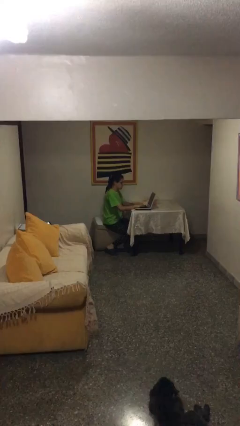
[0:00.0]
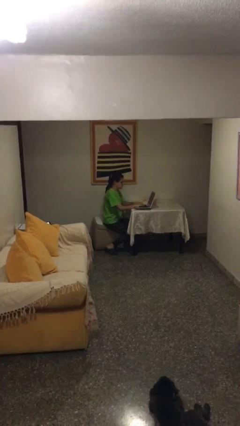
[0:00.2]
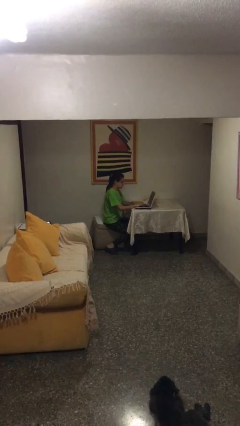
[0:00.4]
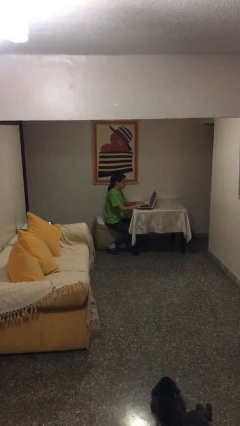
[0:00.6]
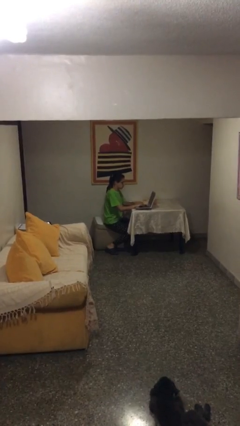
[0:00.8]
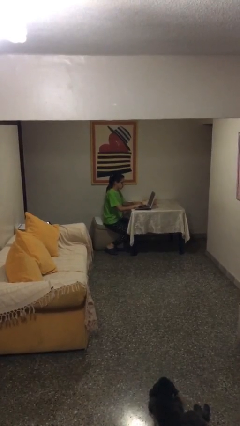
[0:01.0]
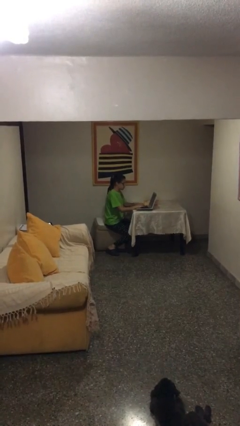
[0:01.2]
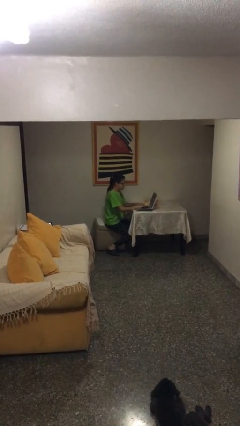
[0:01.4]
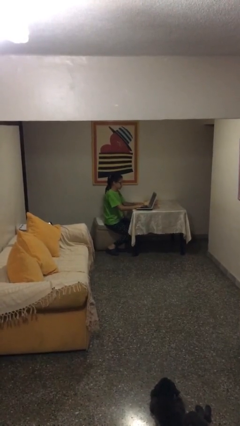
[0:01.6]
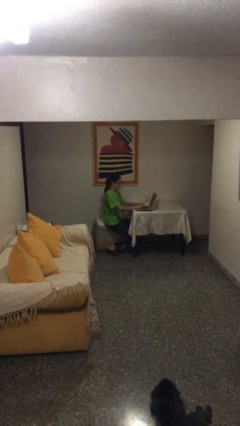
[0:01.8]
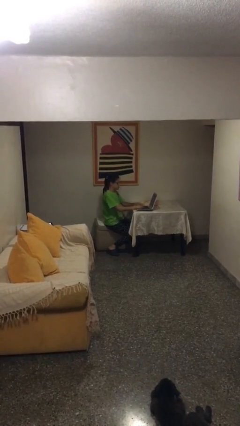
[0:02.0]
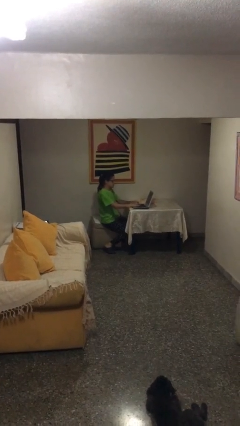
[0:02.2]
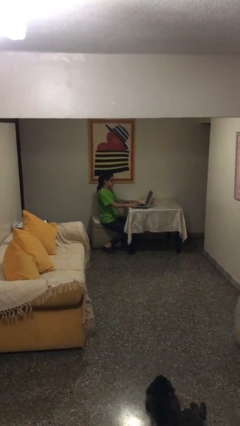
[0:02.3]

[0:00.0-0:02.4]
person interacts with laptop

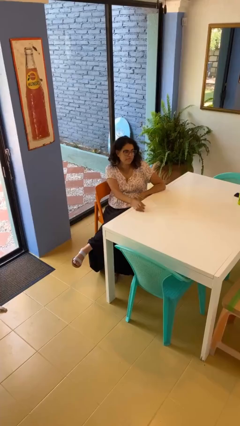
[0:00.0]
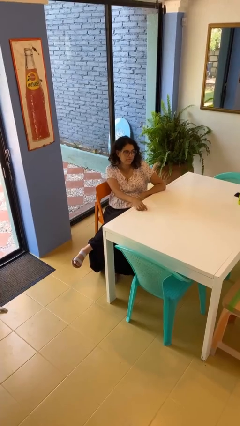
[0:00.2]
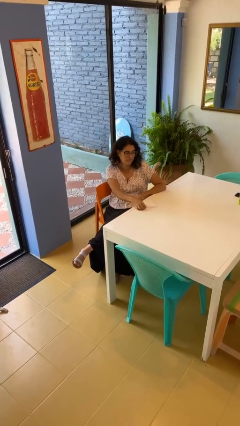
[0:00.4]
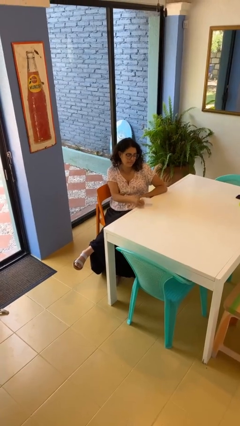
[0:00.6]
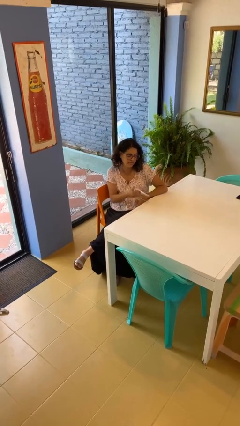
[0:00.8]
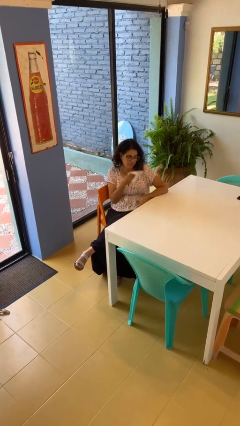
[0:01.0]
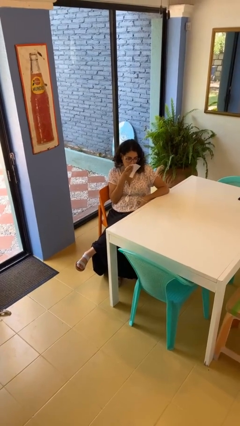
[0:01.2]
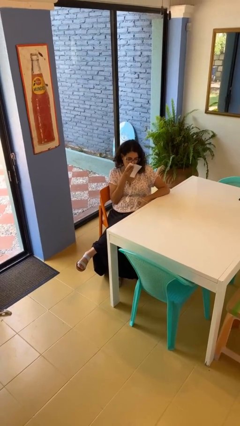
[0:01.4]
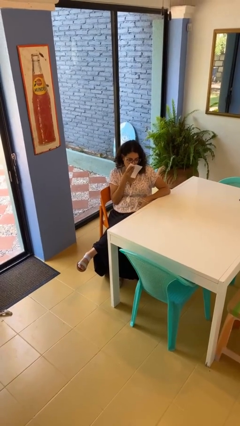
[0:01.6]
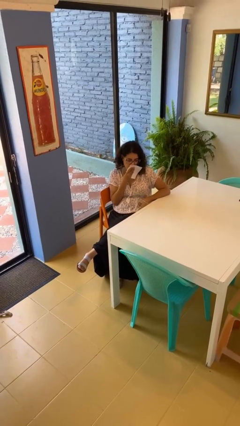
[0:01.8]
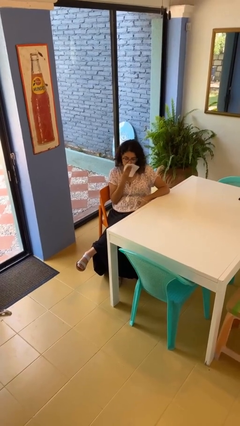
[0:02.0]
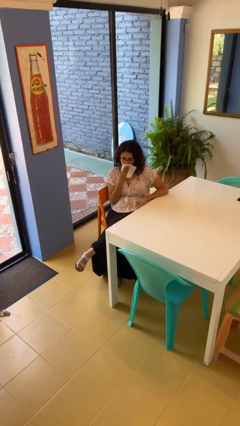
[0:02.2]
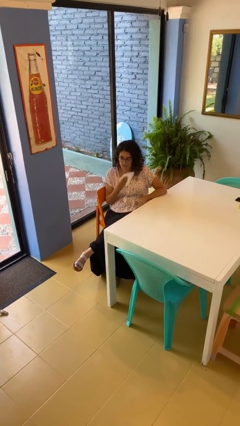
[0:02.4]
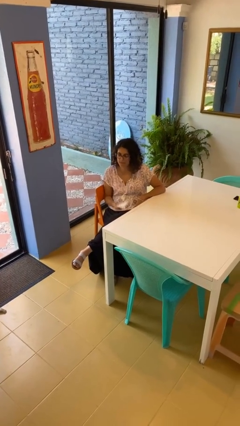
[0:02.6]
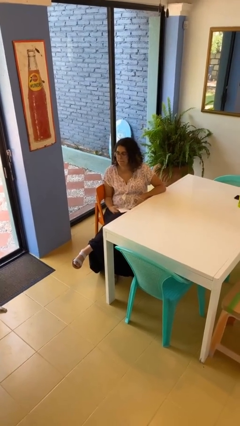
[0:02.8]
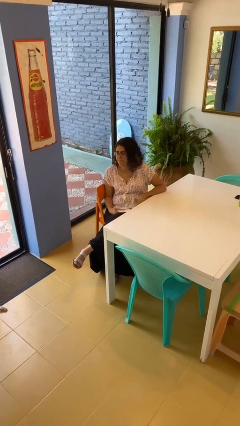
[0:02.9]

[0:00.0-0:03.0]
person wipes mouth with napkin

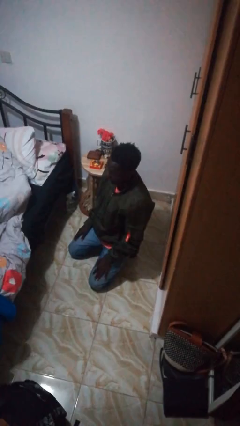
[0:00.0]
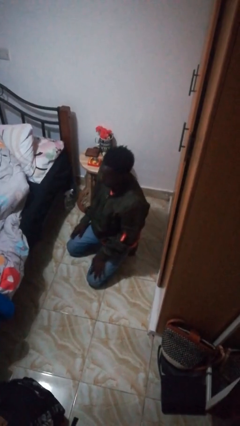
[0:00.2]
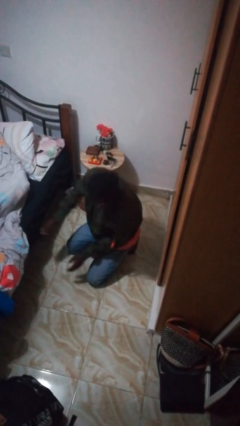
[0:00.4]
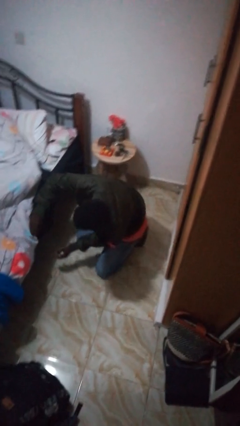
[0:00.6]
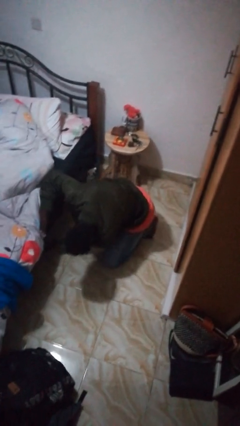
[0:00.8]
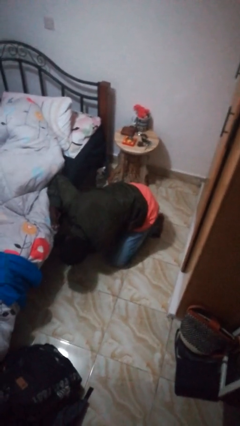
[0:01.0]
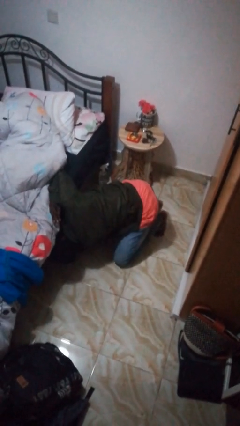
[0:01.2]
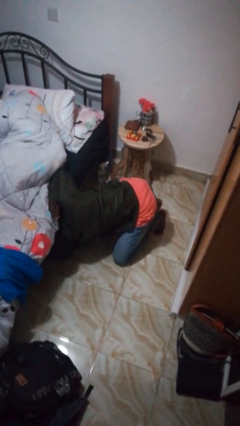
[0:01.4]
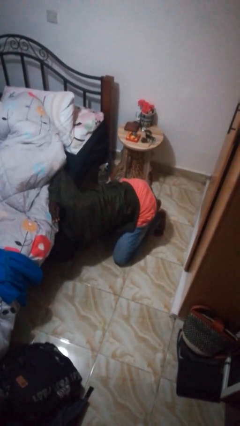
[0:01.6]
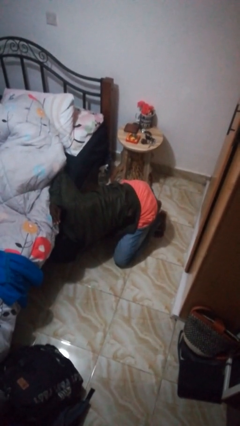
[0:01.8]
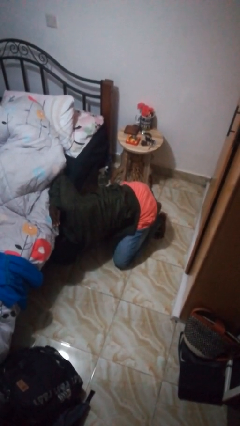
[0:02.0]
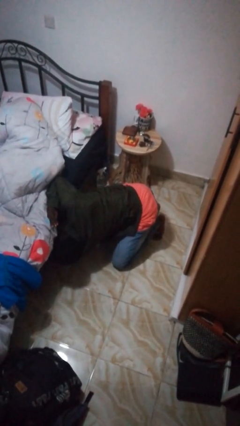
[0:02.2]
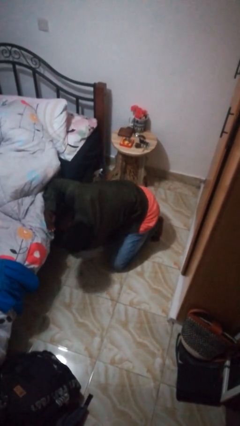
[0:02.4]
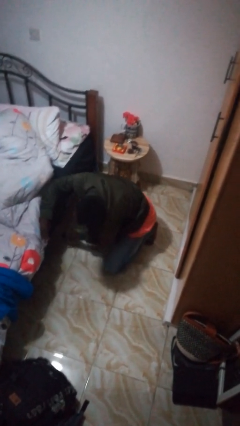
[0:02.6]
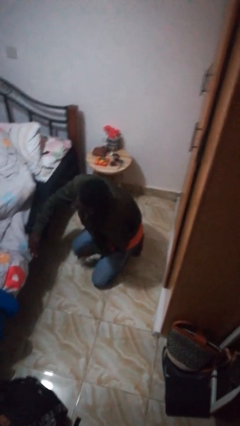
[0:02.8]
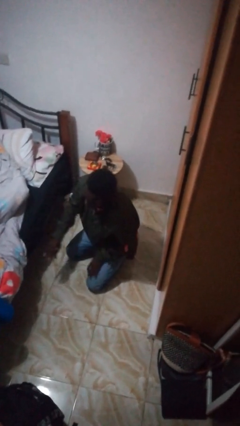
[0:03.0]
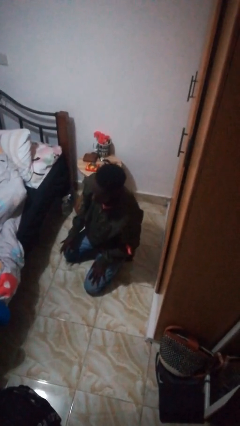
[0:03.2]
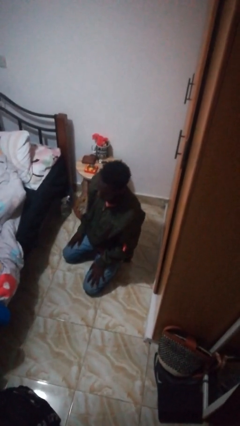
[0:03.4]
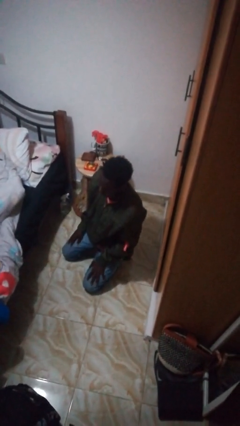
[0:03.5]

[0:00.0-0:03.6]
person searches under bed

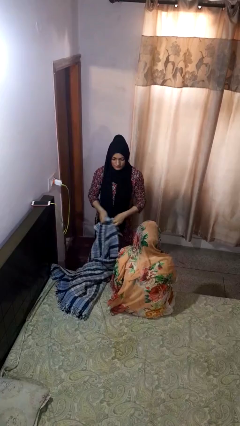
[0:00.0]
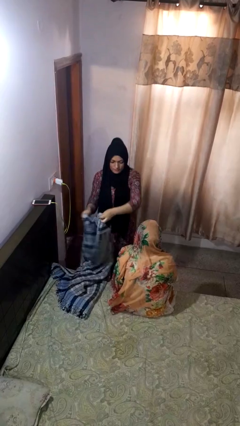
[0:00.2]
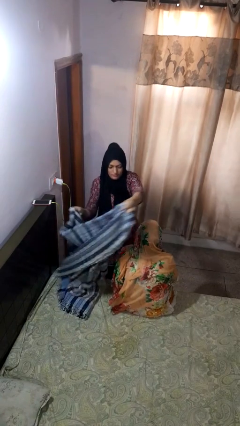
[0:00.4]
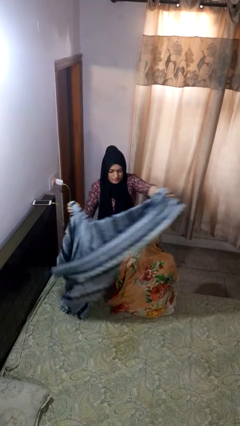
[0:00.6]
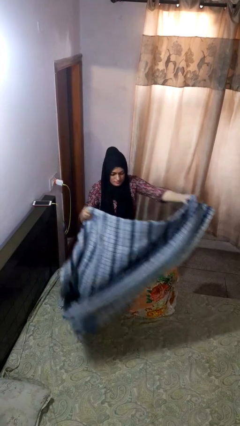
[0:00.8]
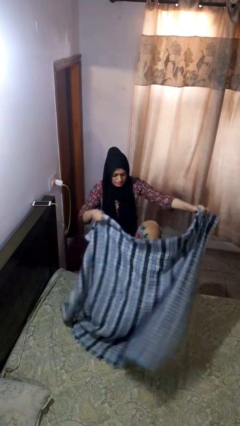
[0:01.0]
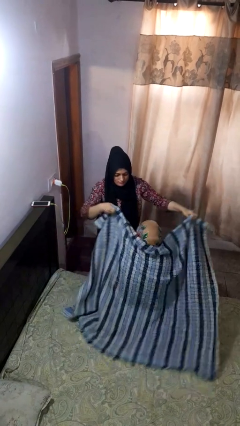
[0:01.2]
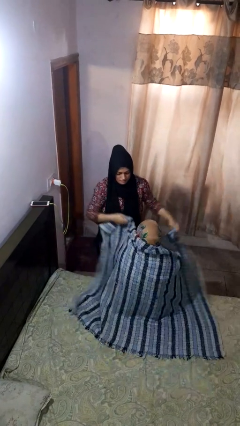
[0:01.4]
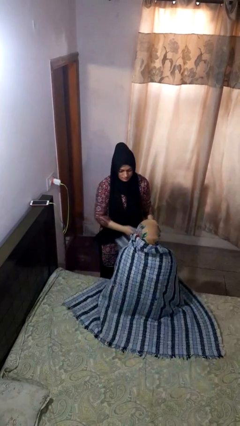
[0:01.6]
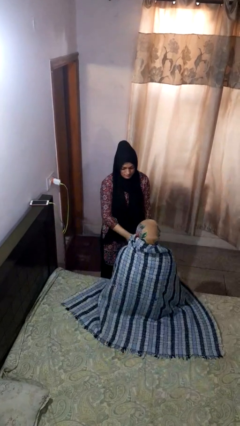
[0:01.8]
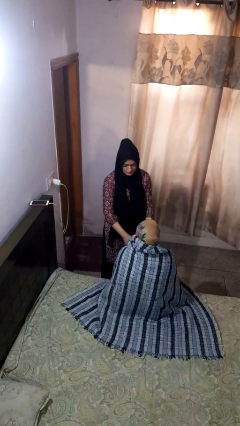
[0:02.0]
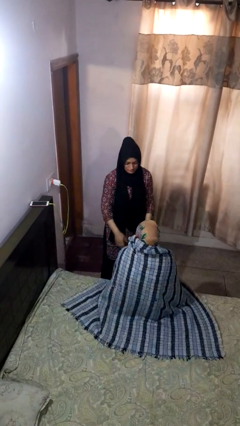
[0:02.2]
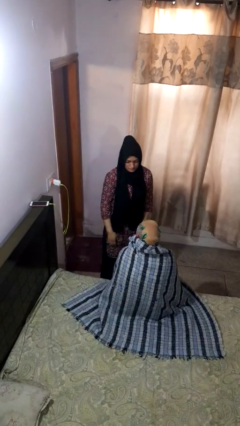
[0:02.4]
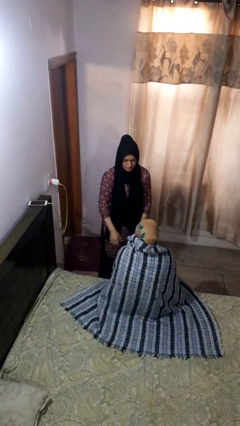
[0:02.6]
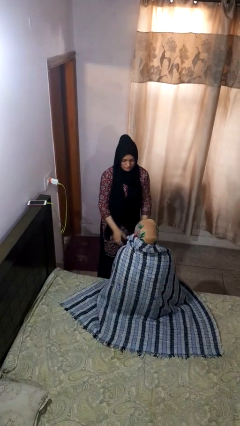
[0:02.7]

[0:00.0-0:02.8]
person covers friend with blanket

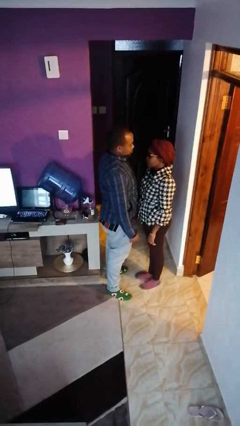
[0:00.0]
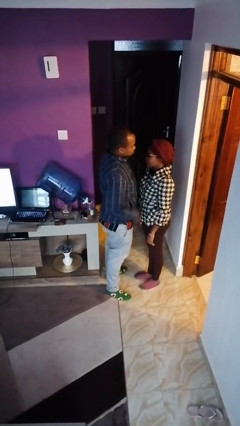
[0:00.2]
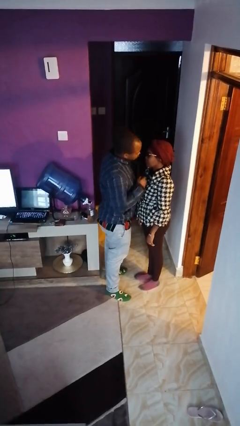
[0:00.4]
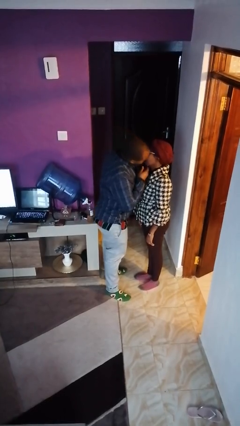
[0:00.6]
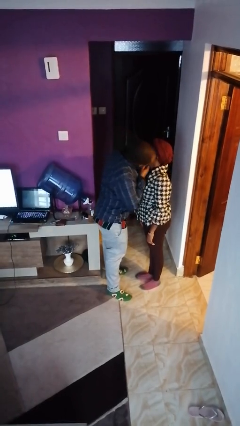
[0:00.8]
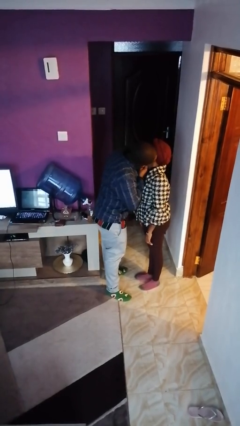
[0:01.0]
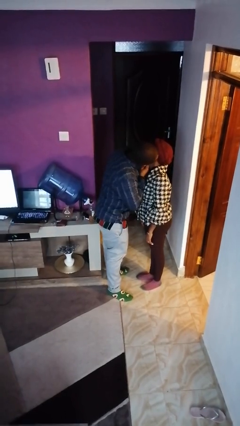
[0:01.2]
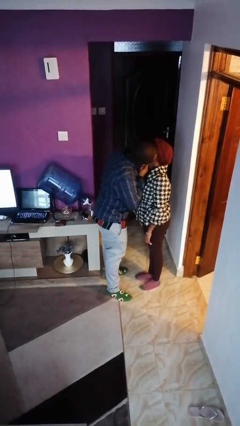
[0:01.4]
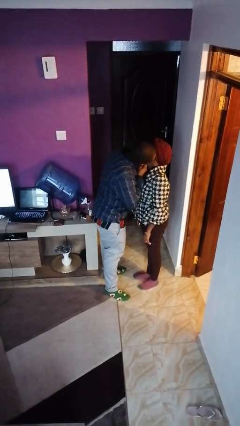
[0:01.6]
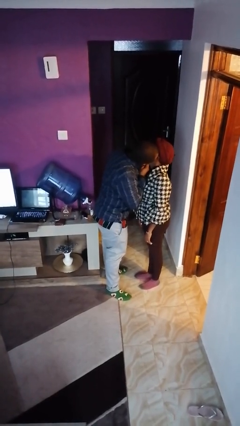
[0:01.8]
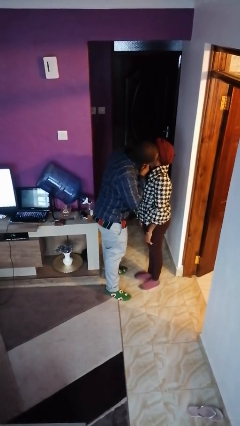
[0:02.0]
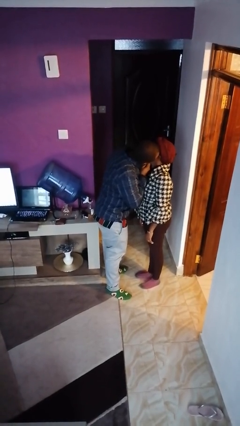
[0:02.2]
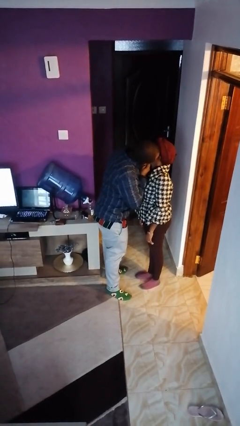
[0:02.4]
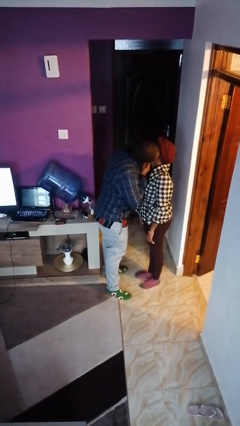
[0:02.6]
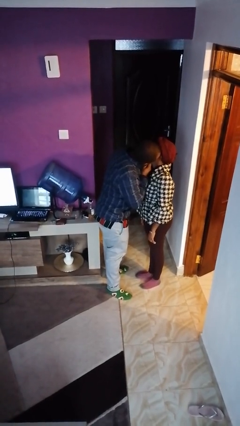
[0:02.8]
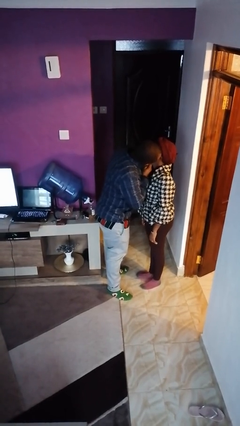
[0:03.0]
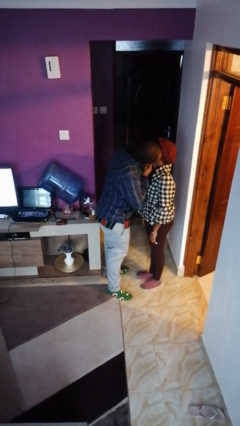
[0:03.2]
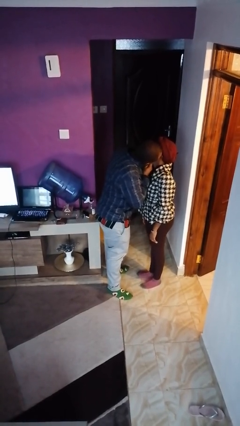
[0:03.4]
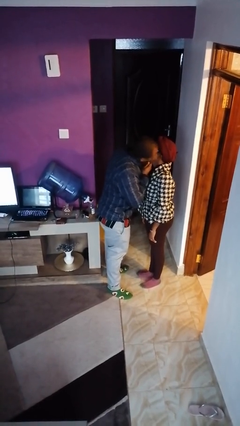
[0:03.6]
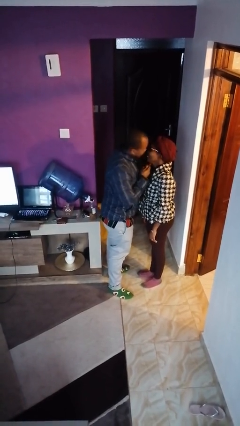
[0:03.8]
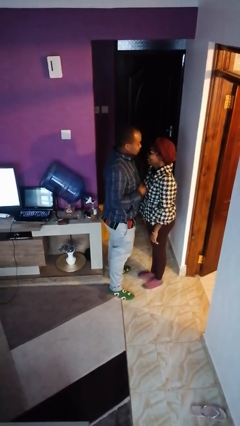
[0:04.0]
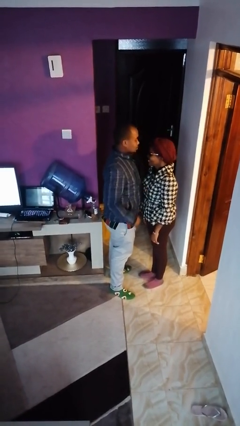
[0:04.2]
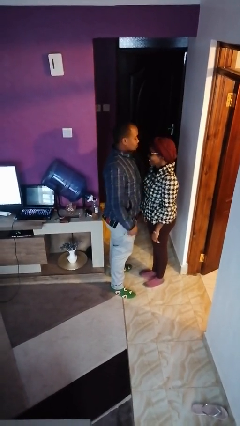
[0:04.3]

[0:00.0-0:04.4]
person kisses cheek of person

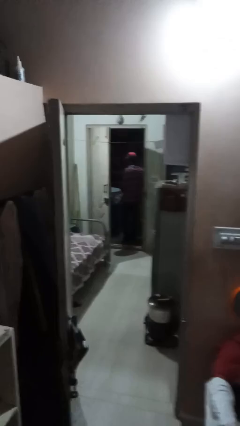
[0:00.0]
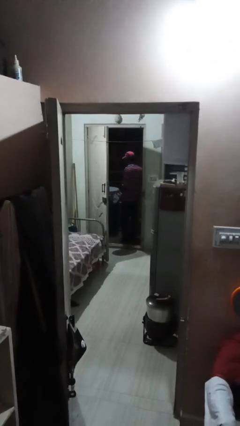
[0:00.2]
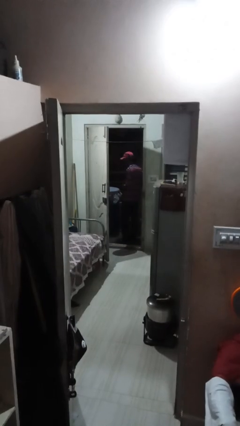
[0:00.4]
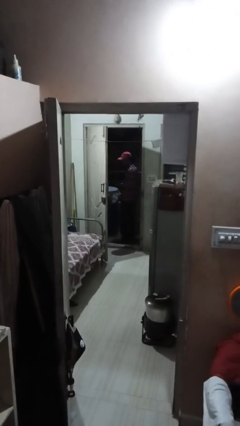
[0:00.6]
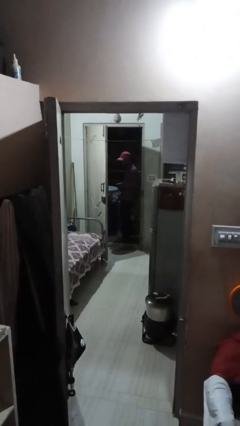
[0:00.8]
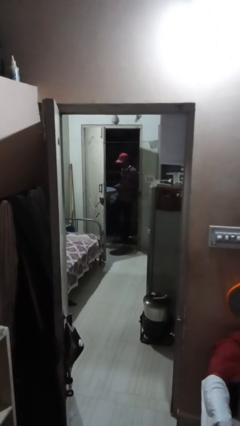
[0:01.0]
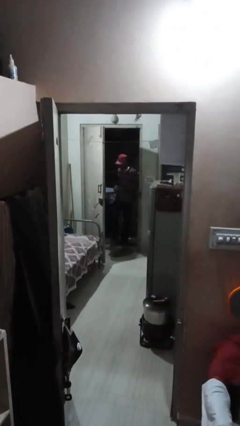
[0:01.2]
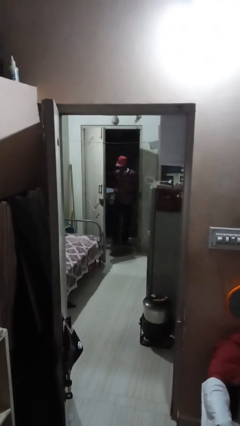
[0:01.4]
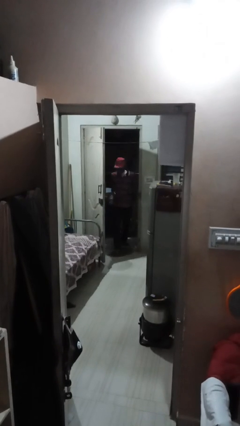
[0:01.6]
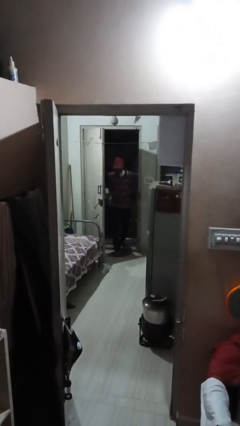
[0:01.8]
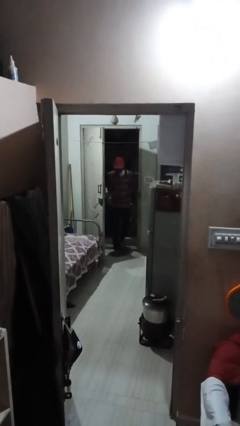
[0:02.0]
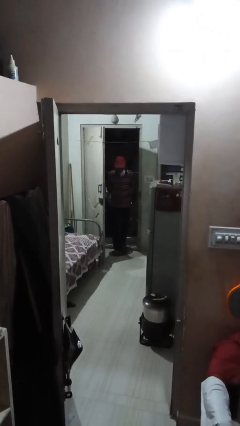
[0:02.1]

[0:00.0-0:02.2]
person enters scene through structure
